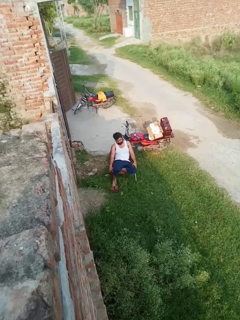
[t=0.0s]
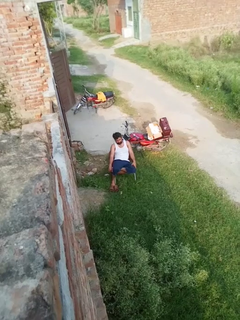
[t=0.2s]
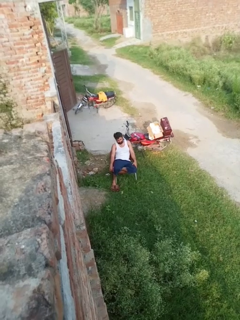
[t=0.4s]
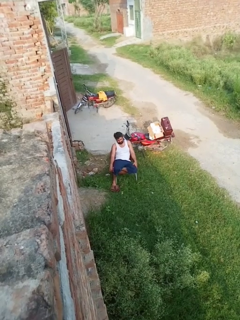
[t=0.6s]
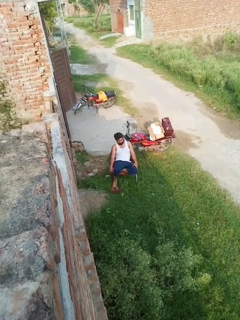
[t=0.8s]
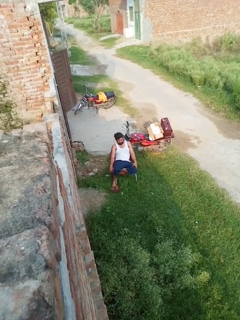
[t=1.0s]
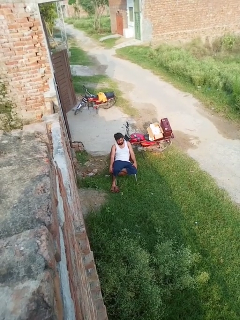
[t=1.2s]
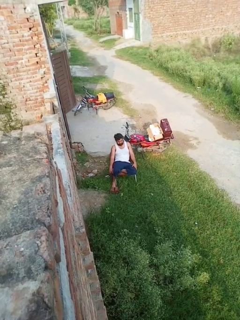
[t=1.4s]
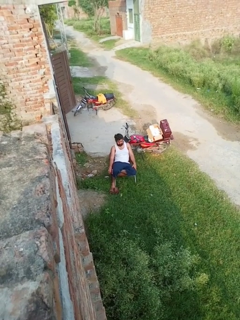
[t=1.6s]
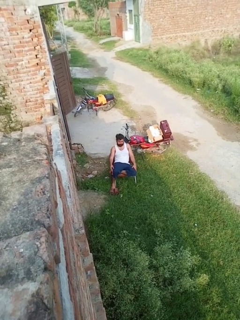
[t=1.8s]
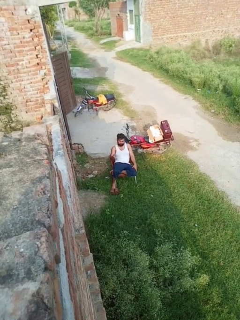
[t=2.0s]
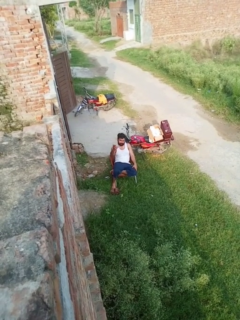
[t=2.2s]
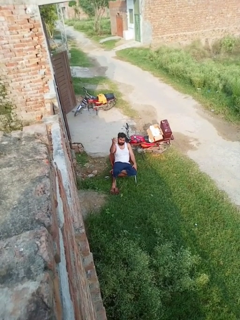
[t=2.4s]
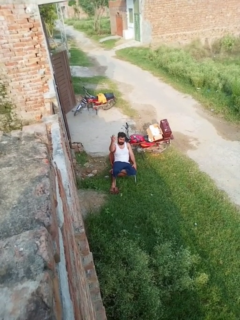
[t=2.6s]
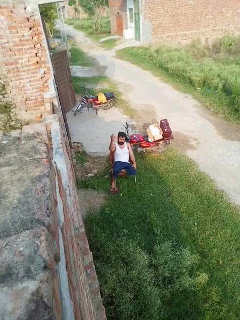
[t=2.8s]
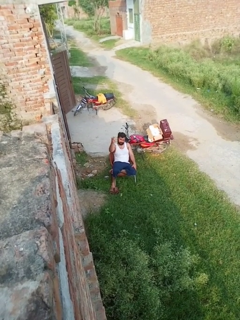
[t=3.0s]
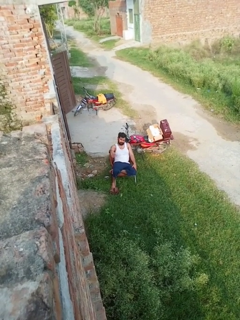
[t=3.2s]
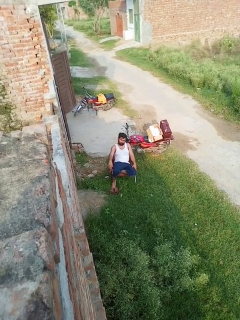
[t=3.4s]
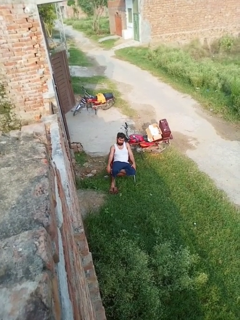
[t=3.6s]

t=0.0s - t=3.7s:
person gestures raise hand

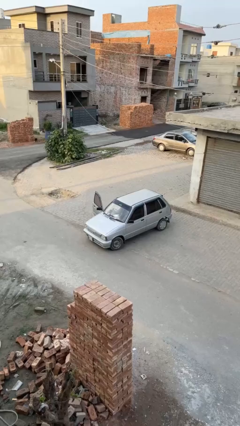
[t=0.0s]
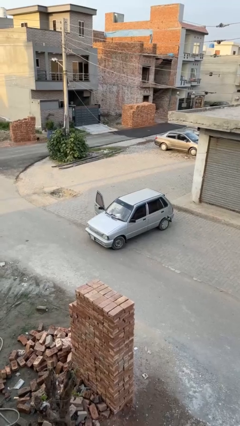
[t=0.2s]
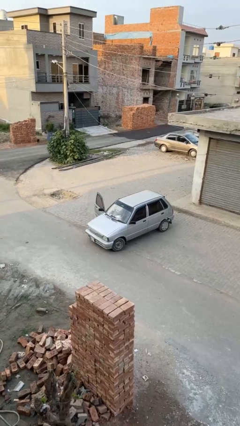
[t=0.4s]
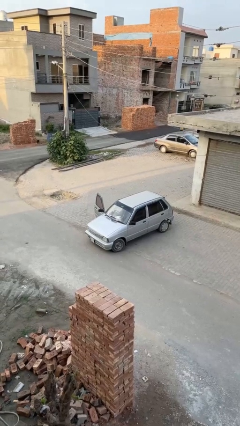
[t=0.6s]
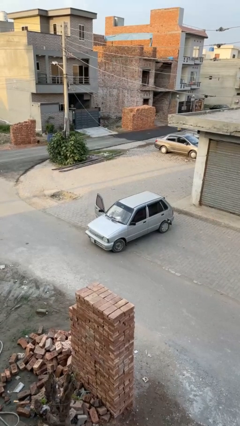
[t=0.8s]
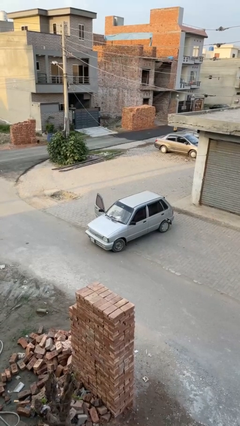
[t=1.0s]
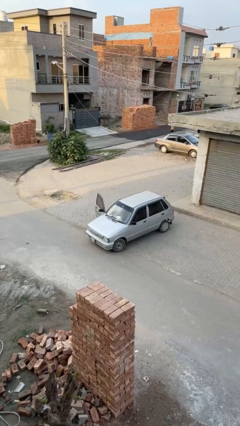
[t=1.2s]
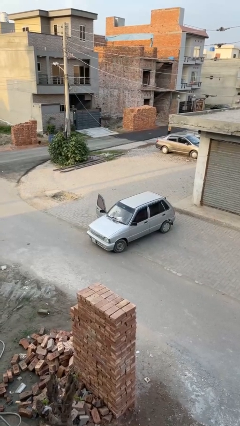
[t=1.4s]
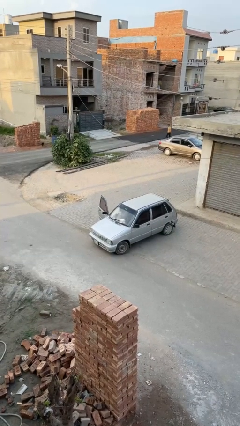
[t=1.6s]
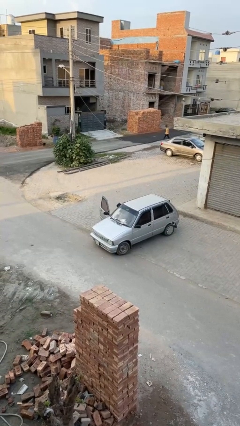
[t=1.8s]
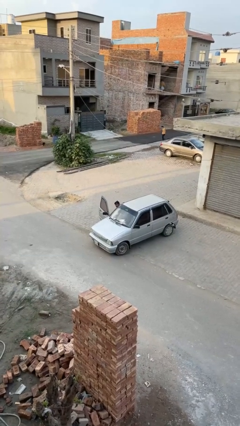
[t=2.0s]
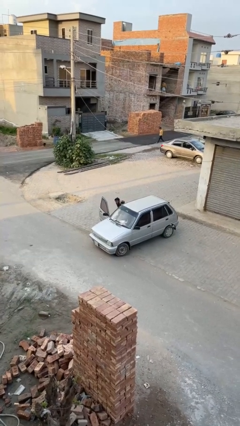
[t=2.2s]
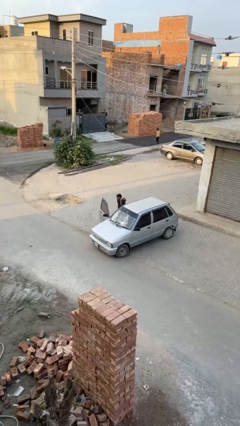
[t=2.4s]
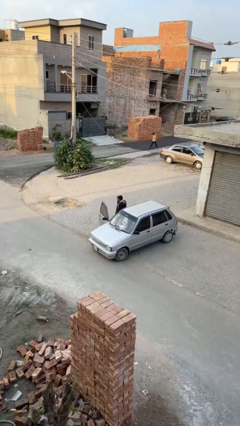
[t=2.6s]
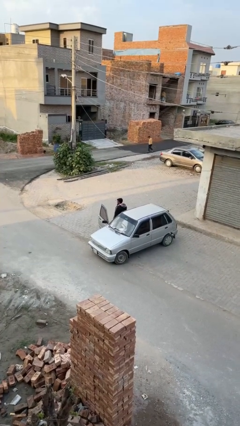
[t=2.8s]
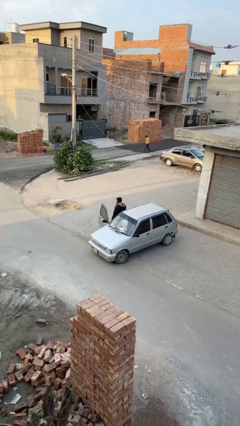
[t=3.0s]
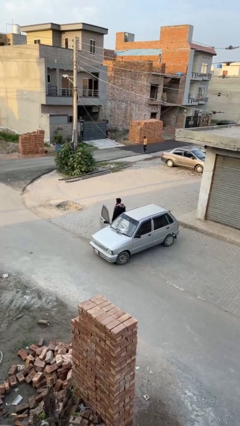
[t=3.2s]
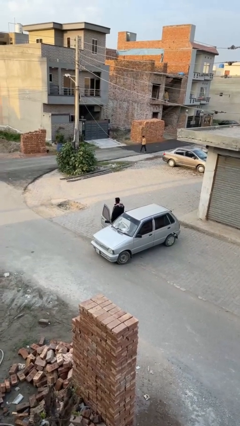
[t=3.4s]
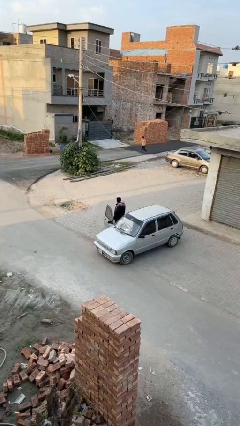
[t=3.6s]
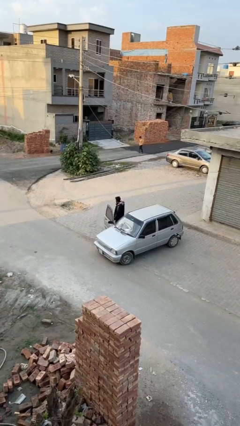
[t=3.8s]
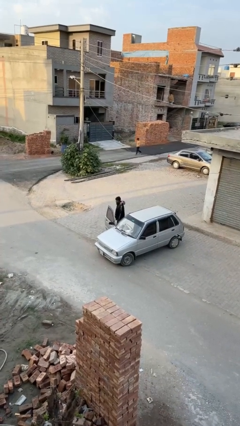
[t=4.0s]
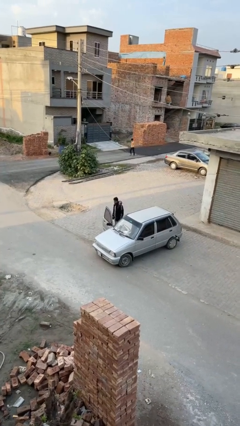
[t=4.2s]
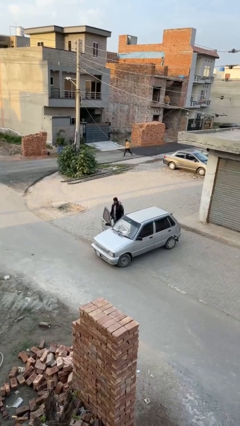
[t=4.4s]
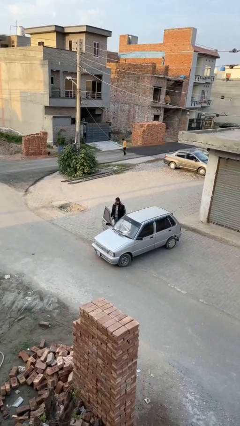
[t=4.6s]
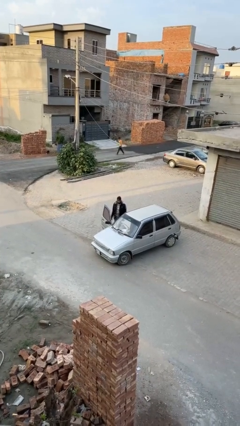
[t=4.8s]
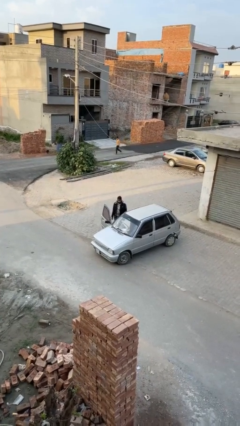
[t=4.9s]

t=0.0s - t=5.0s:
person exits car

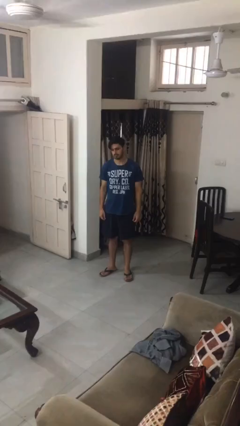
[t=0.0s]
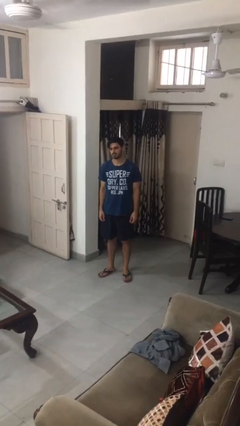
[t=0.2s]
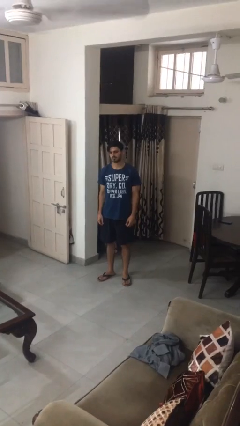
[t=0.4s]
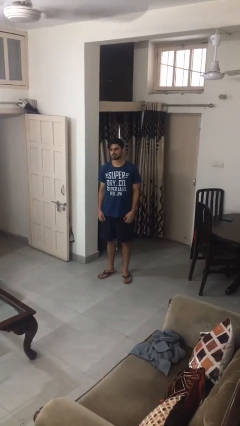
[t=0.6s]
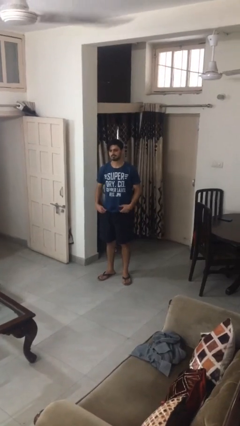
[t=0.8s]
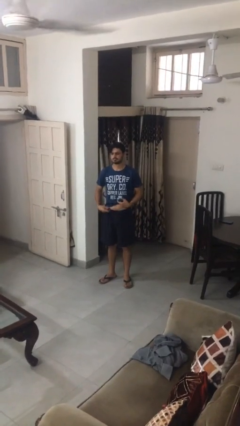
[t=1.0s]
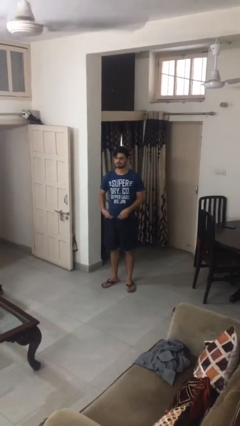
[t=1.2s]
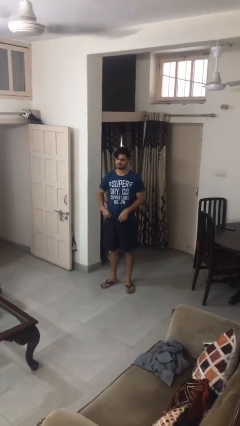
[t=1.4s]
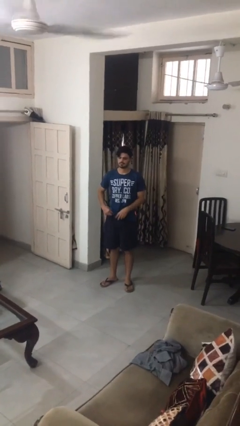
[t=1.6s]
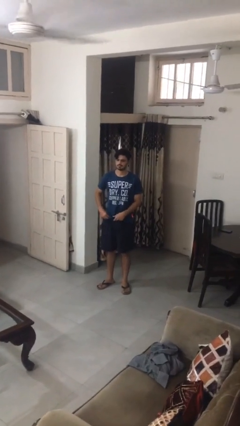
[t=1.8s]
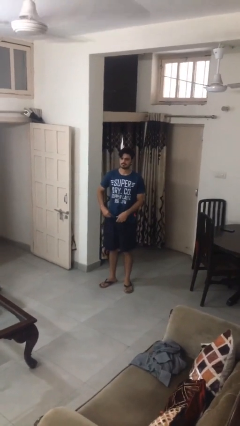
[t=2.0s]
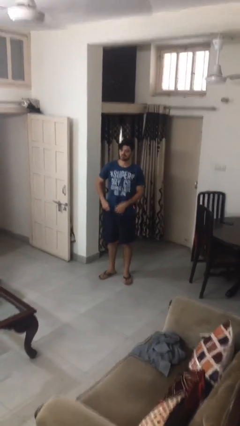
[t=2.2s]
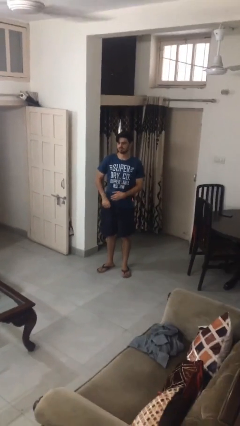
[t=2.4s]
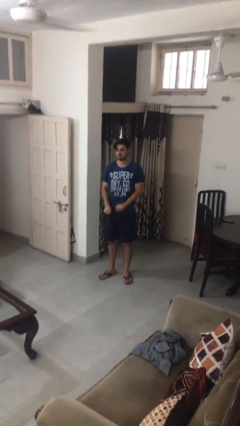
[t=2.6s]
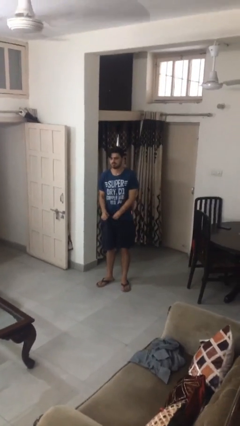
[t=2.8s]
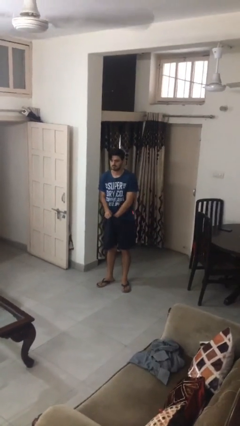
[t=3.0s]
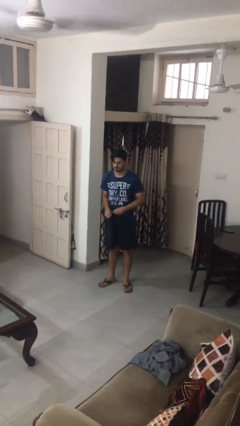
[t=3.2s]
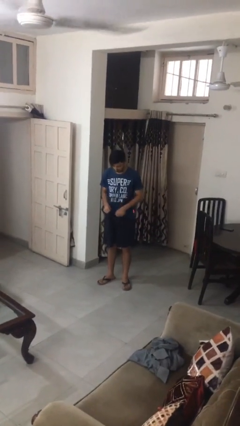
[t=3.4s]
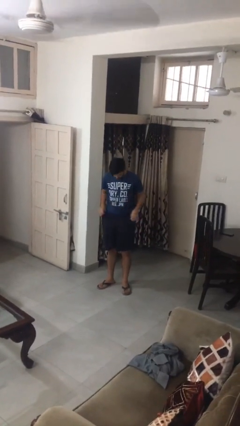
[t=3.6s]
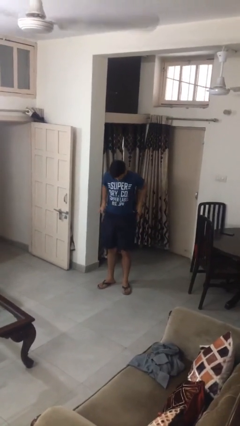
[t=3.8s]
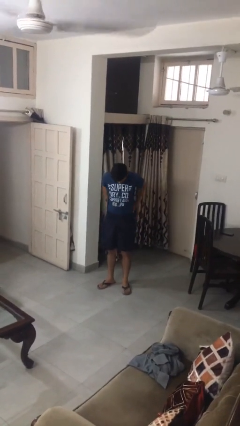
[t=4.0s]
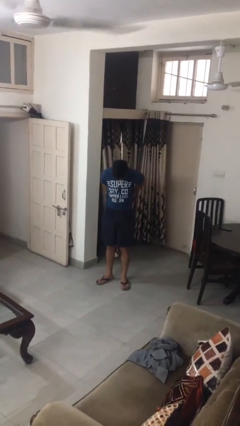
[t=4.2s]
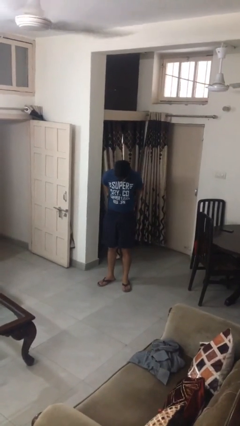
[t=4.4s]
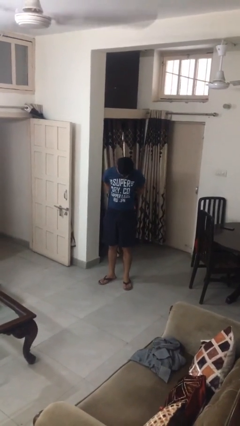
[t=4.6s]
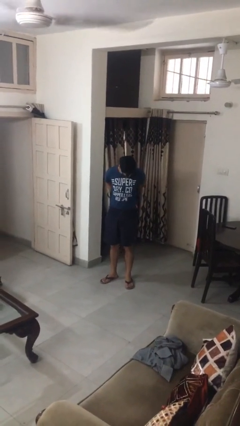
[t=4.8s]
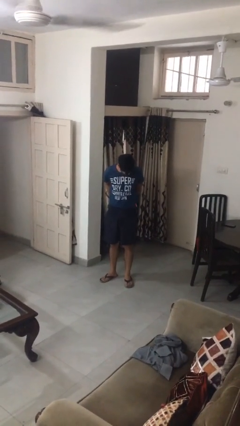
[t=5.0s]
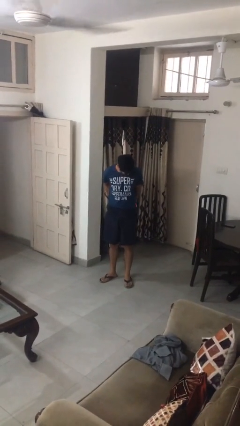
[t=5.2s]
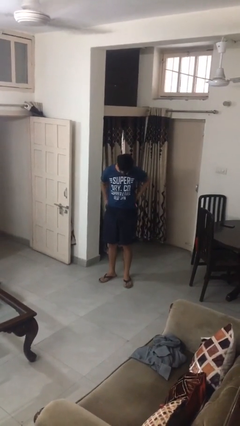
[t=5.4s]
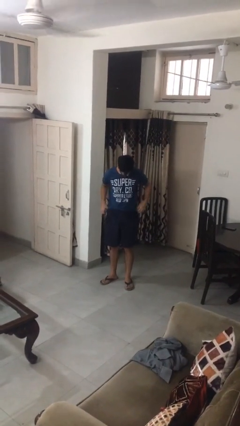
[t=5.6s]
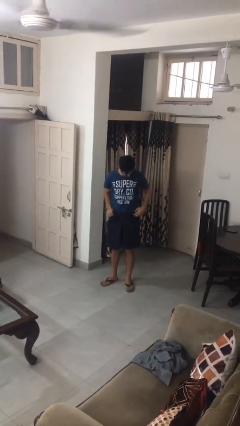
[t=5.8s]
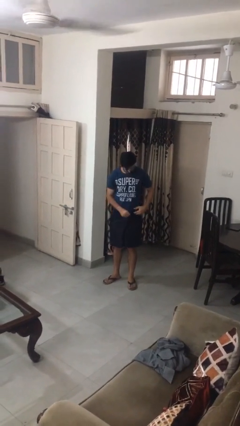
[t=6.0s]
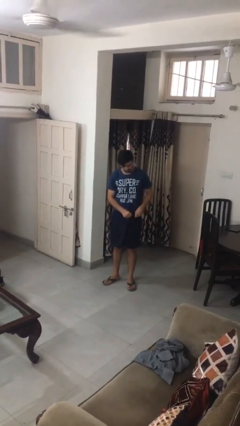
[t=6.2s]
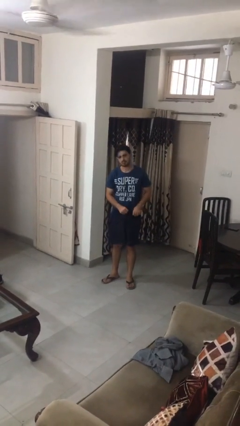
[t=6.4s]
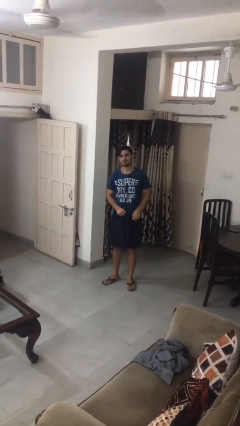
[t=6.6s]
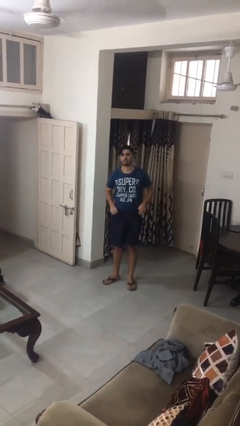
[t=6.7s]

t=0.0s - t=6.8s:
person tucks in shirt

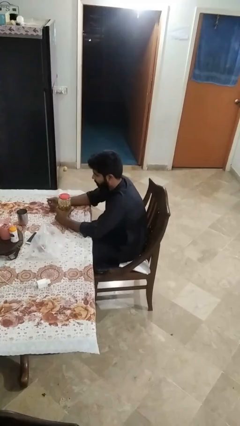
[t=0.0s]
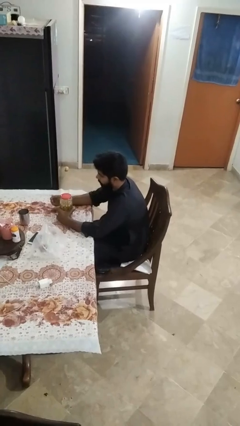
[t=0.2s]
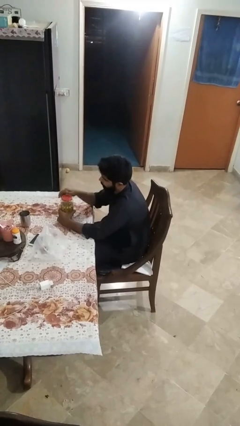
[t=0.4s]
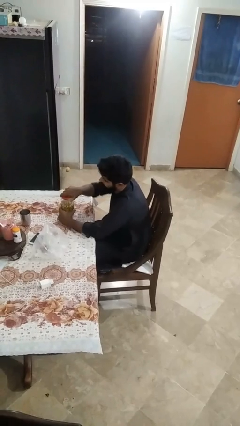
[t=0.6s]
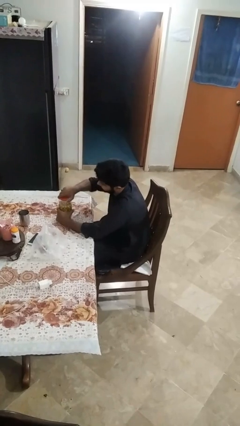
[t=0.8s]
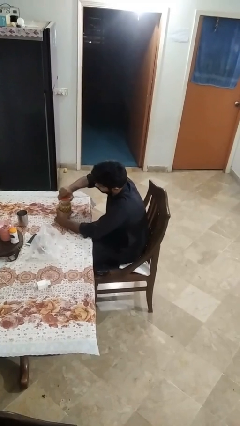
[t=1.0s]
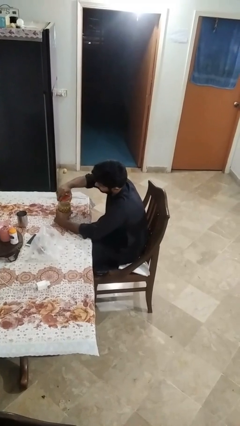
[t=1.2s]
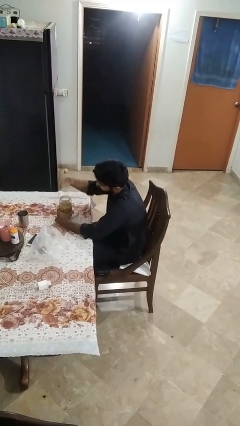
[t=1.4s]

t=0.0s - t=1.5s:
person opens jar

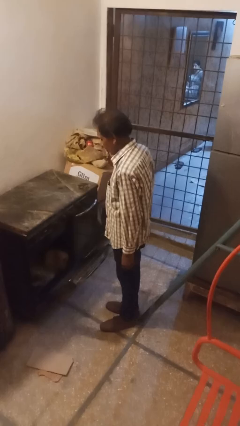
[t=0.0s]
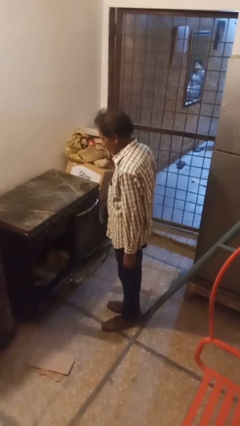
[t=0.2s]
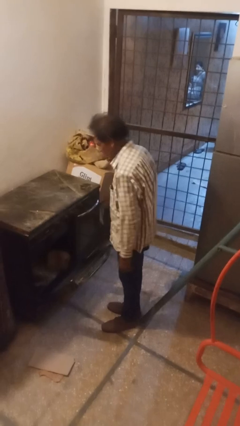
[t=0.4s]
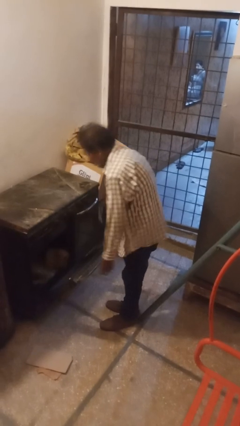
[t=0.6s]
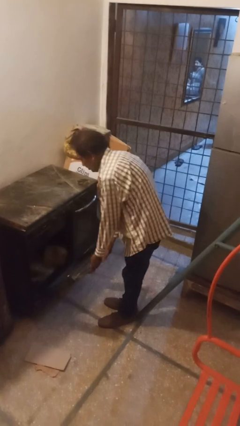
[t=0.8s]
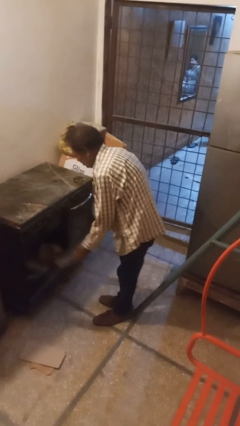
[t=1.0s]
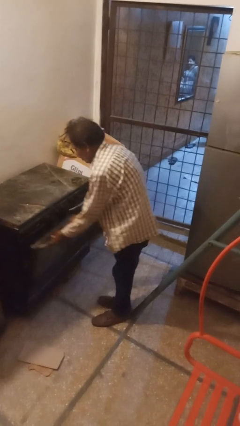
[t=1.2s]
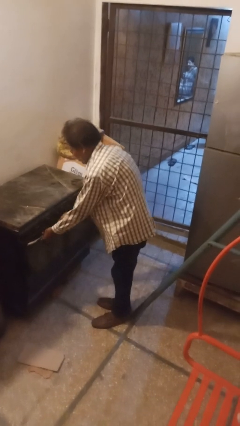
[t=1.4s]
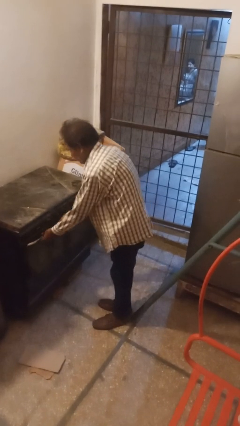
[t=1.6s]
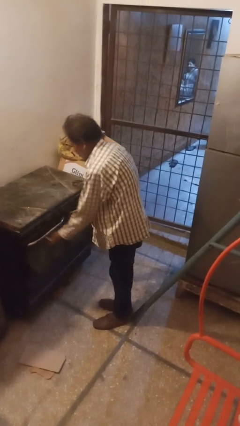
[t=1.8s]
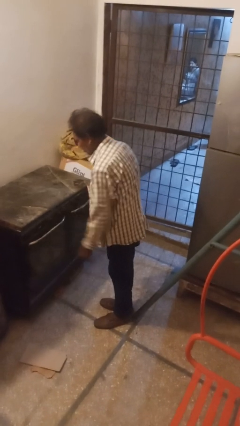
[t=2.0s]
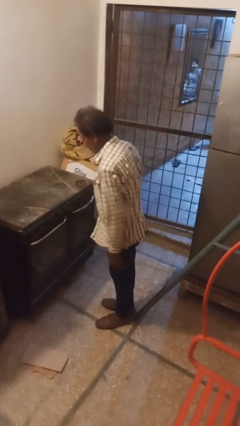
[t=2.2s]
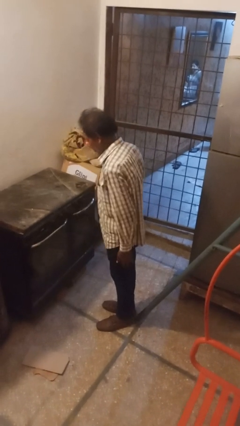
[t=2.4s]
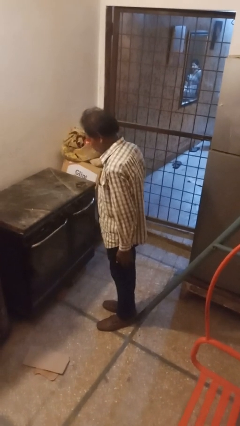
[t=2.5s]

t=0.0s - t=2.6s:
person closes oven door
